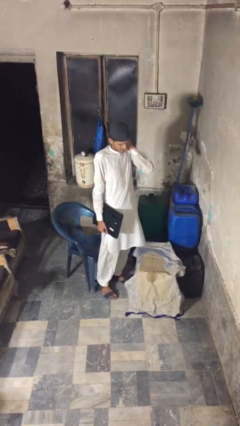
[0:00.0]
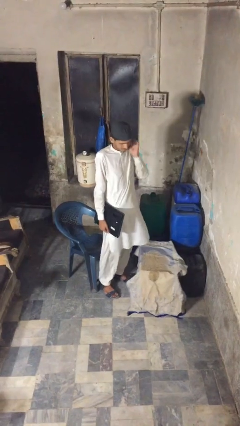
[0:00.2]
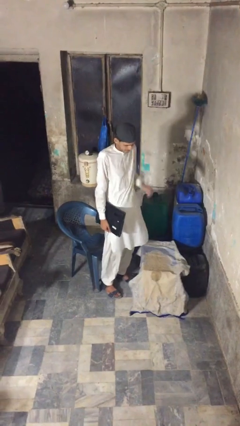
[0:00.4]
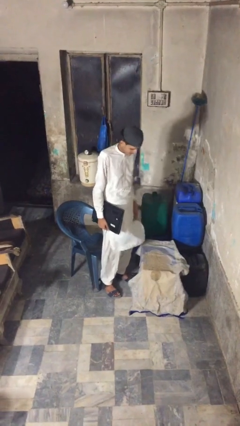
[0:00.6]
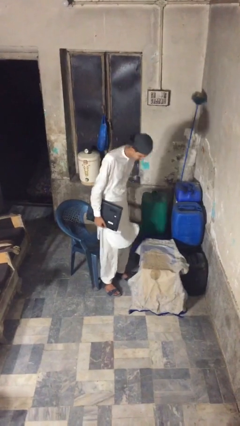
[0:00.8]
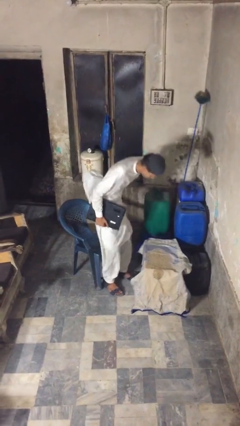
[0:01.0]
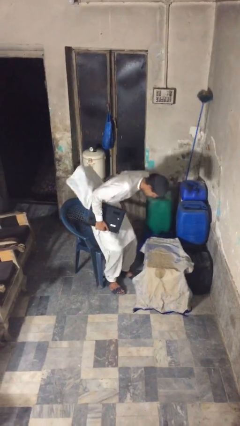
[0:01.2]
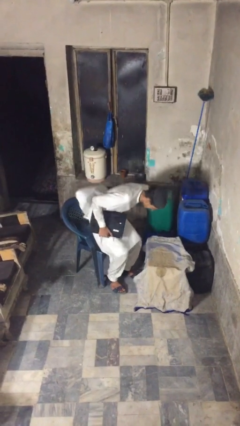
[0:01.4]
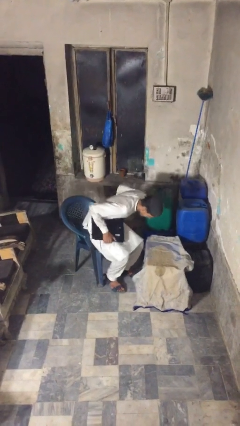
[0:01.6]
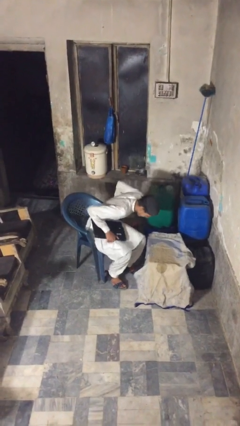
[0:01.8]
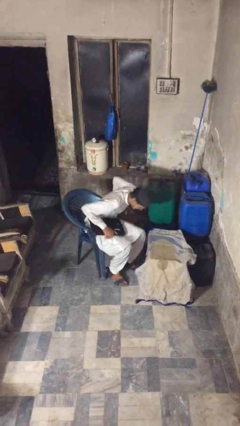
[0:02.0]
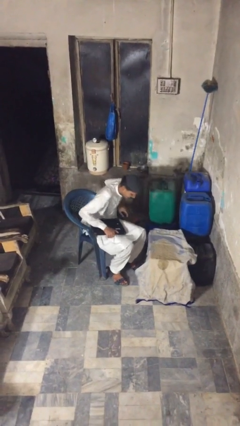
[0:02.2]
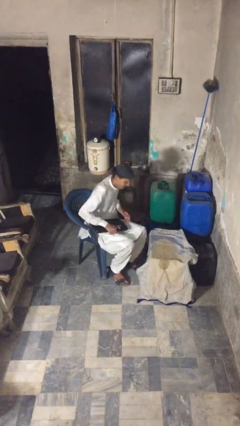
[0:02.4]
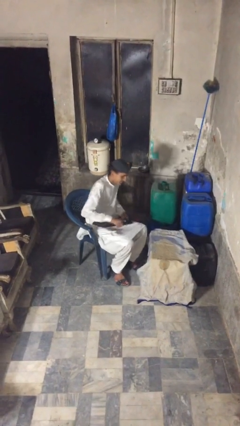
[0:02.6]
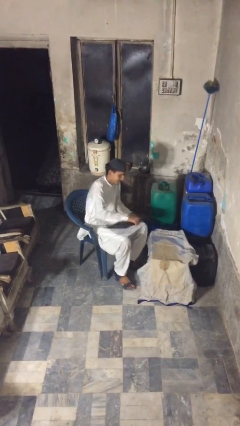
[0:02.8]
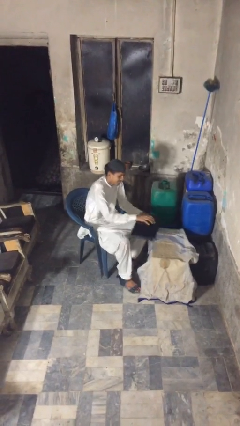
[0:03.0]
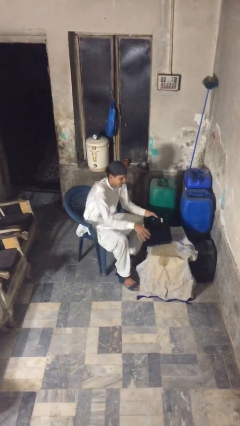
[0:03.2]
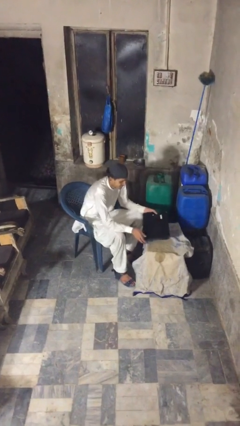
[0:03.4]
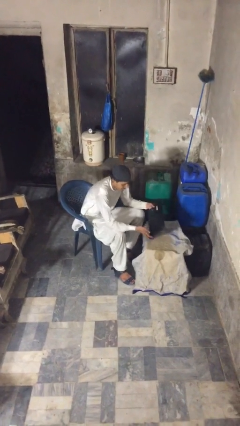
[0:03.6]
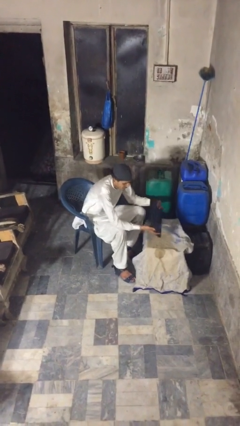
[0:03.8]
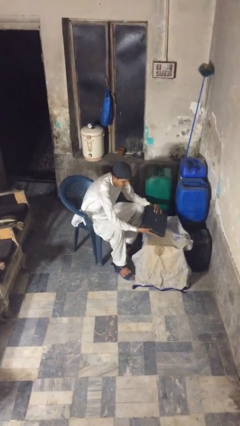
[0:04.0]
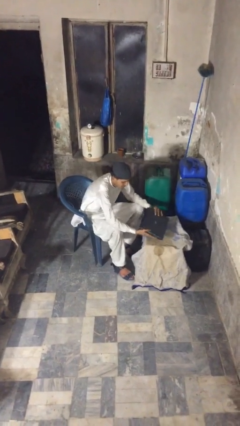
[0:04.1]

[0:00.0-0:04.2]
person sits down

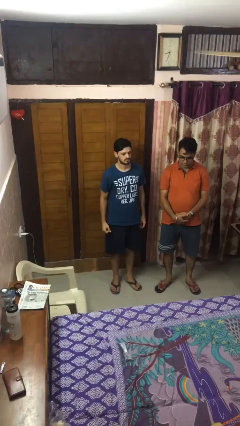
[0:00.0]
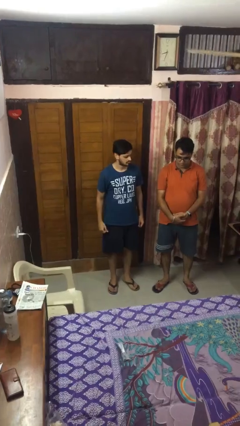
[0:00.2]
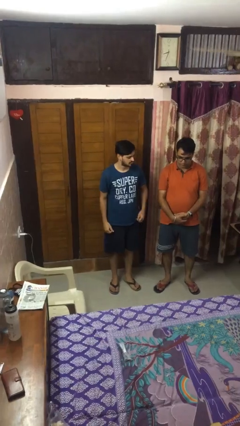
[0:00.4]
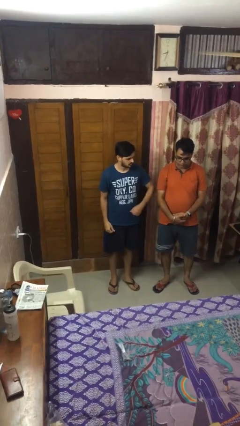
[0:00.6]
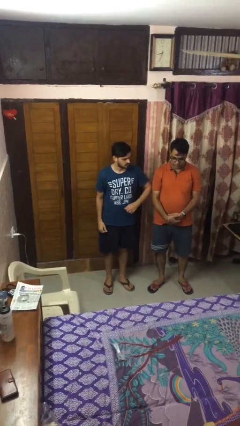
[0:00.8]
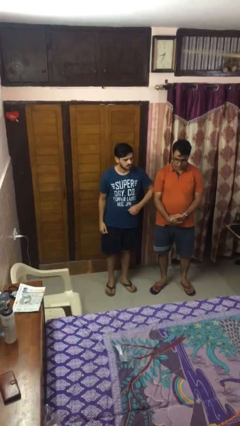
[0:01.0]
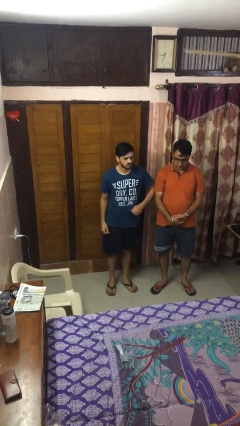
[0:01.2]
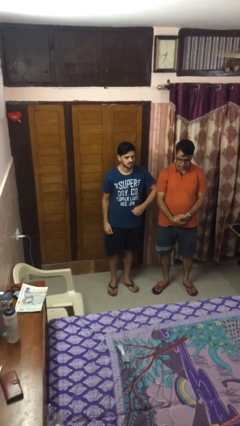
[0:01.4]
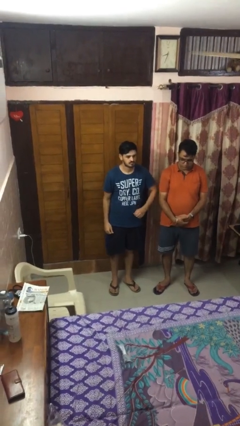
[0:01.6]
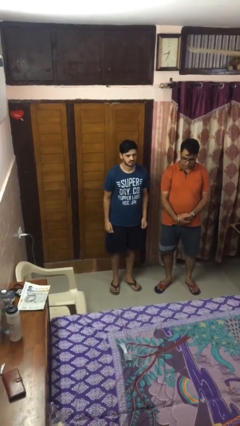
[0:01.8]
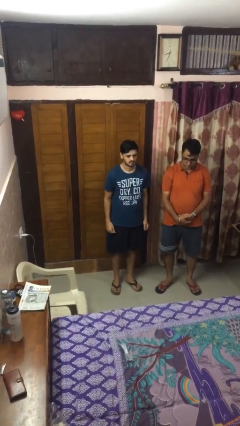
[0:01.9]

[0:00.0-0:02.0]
person nudges person with elbow

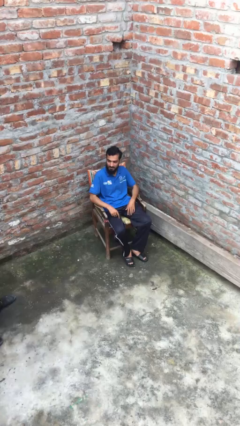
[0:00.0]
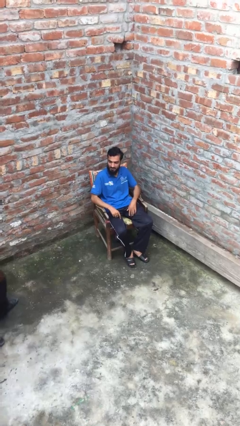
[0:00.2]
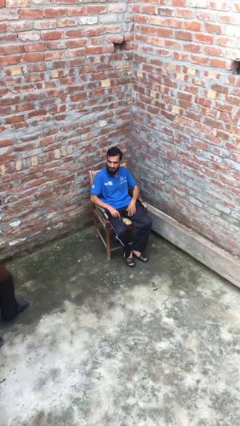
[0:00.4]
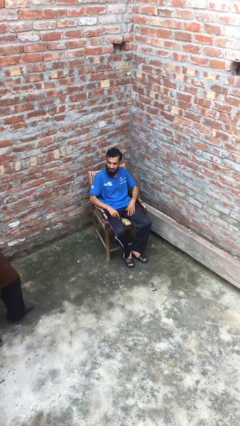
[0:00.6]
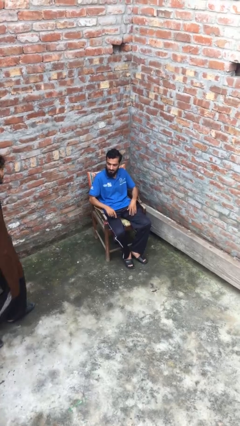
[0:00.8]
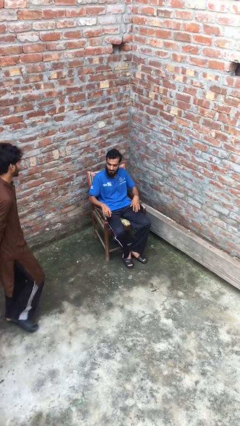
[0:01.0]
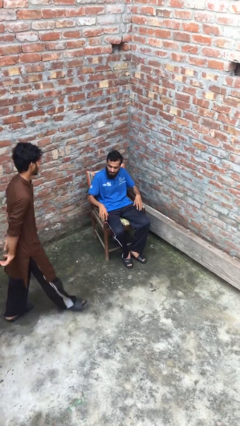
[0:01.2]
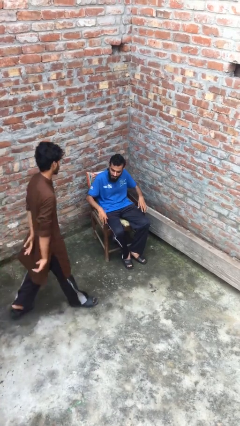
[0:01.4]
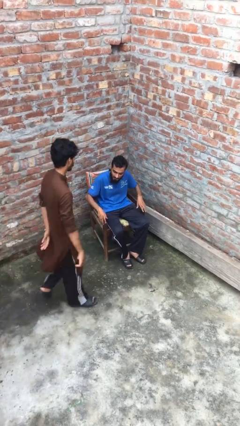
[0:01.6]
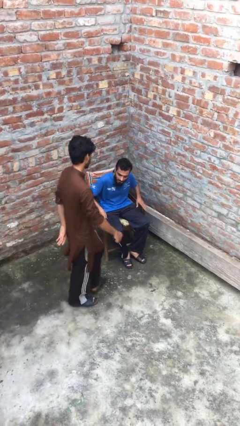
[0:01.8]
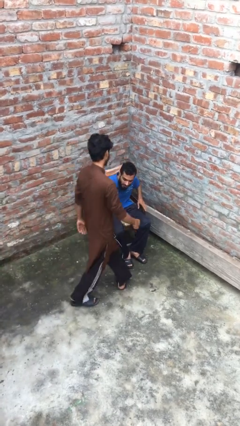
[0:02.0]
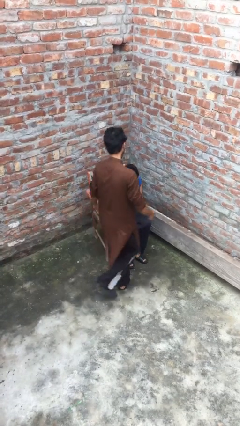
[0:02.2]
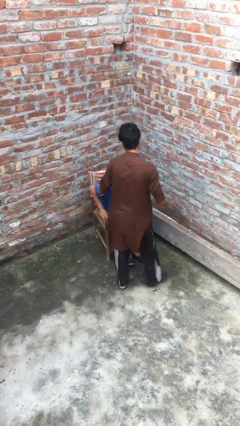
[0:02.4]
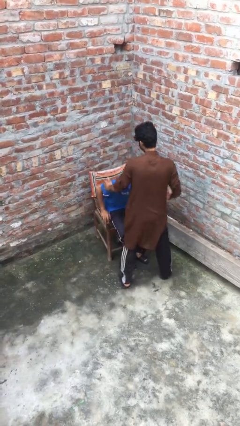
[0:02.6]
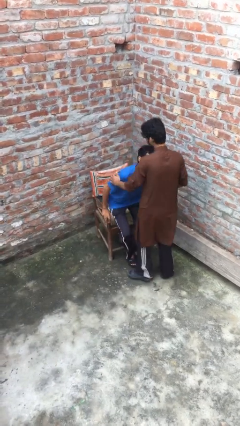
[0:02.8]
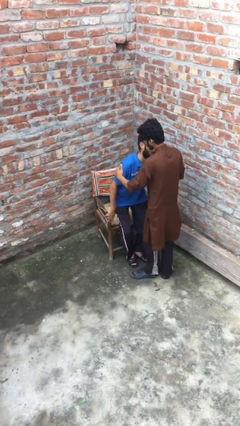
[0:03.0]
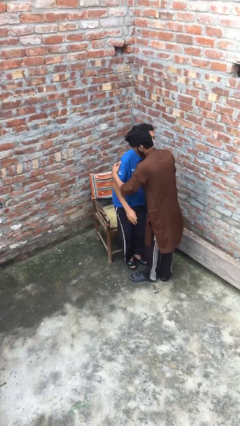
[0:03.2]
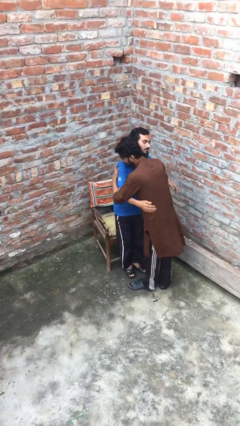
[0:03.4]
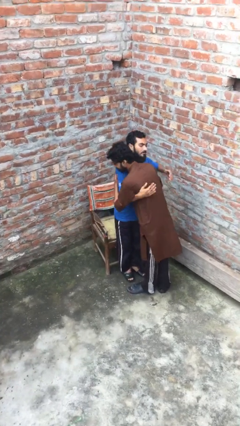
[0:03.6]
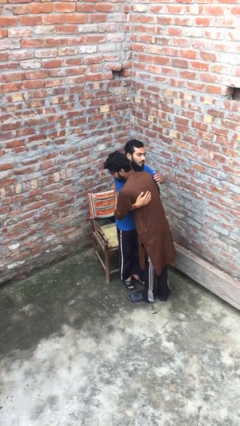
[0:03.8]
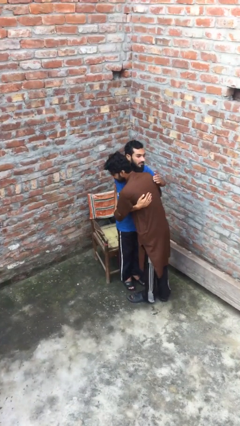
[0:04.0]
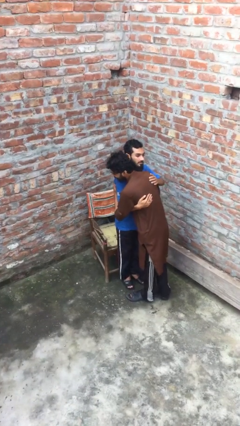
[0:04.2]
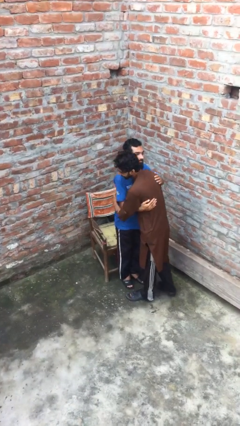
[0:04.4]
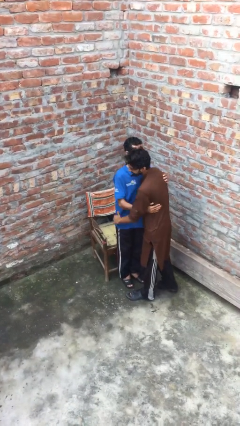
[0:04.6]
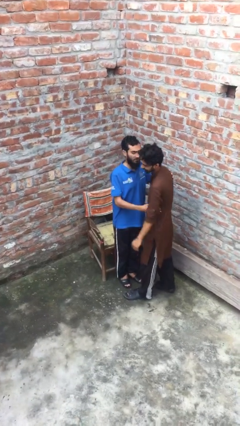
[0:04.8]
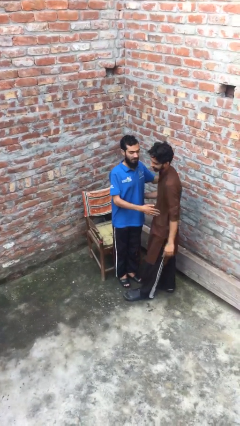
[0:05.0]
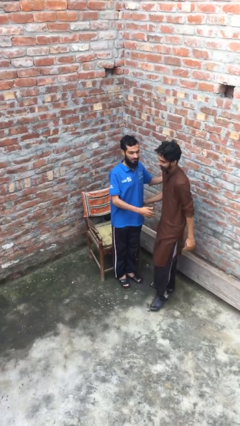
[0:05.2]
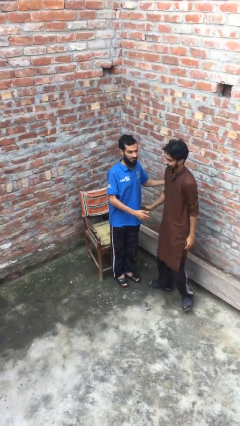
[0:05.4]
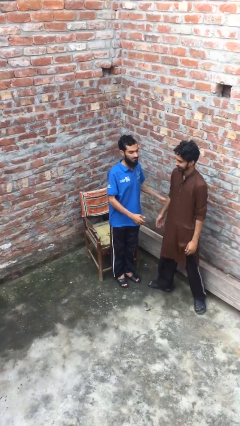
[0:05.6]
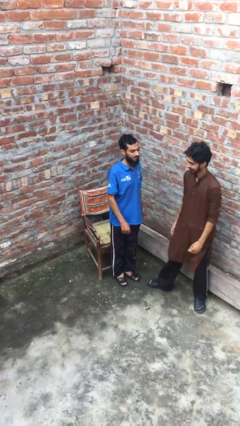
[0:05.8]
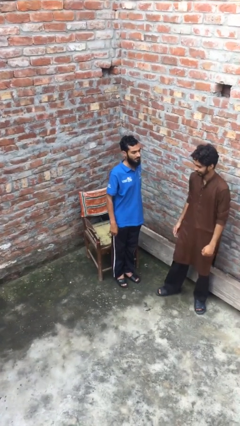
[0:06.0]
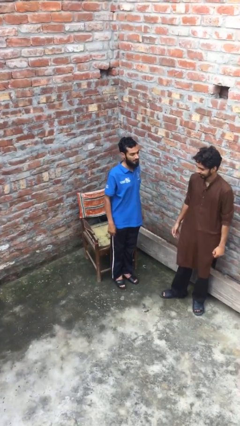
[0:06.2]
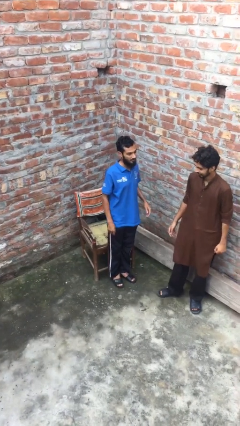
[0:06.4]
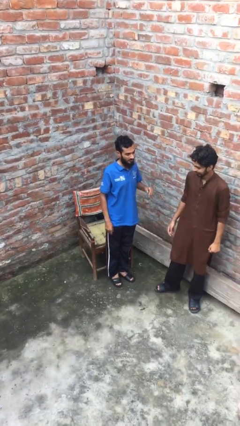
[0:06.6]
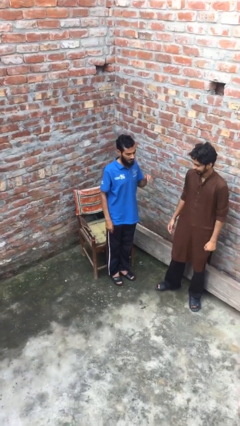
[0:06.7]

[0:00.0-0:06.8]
person embraces person

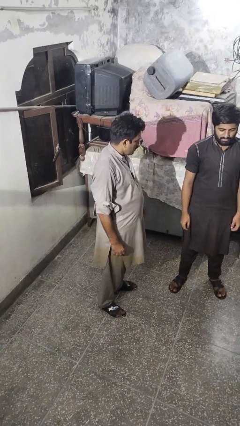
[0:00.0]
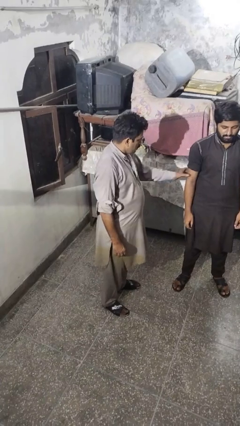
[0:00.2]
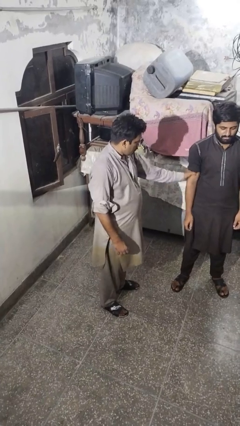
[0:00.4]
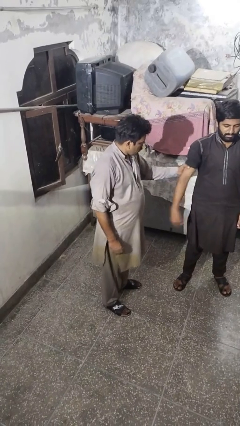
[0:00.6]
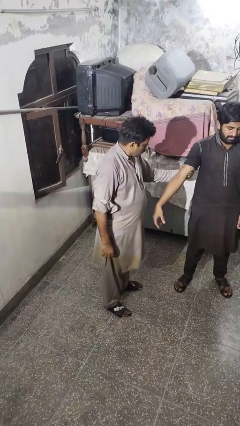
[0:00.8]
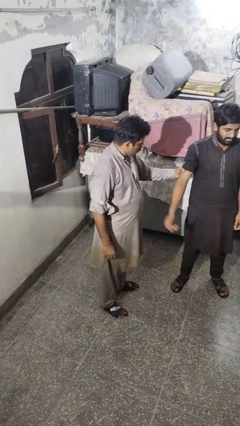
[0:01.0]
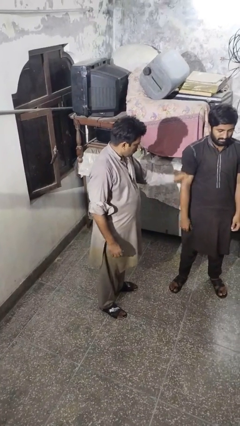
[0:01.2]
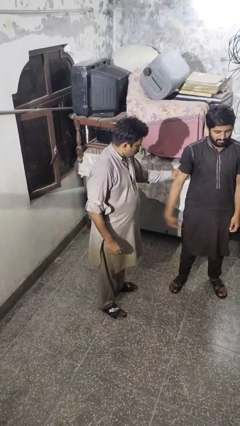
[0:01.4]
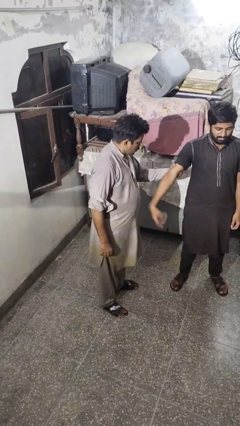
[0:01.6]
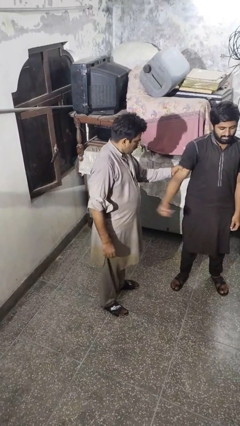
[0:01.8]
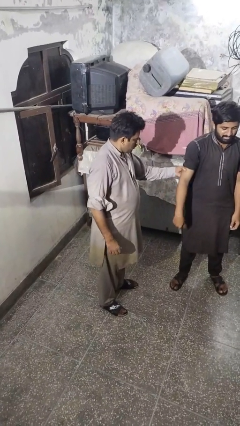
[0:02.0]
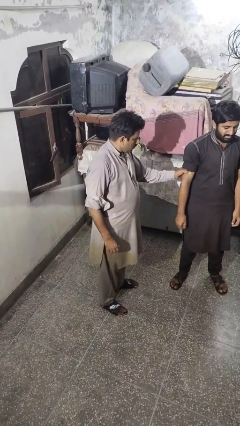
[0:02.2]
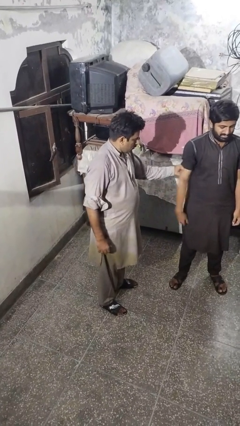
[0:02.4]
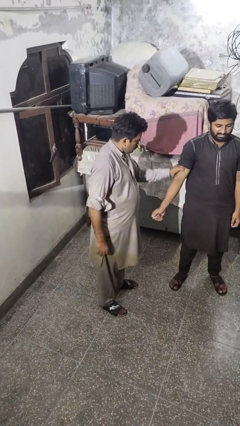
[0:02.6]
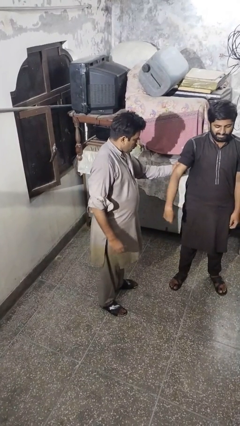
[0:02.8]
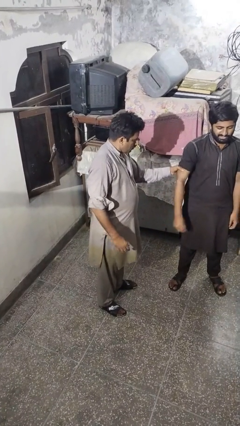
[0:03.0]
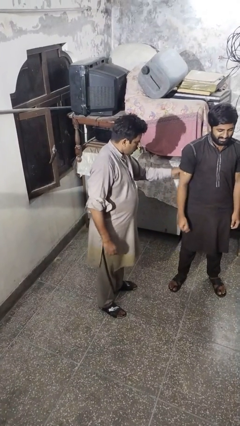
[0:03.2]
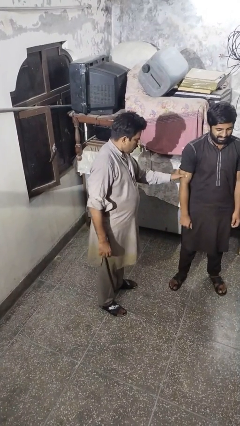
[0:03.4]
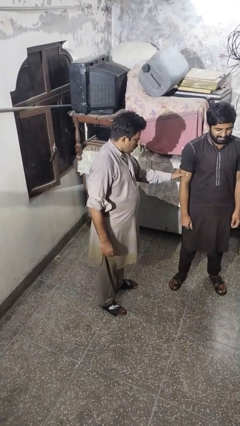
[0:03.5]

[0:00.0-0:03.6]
person grabs person by bicep

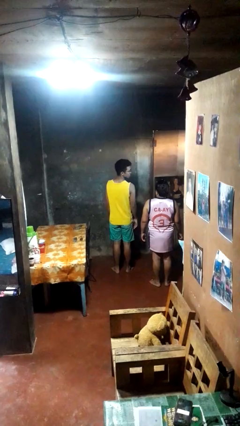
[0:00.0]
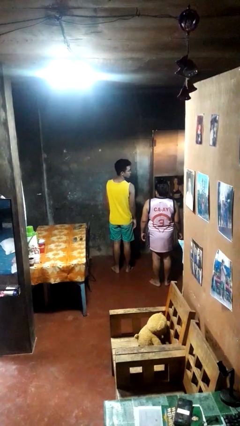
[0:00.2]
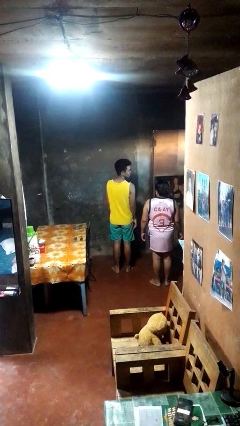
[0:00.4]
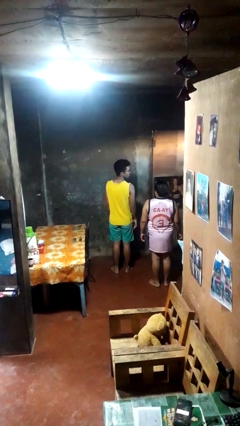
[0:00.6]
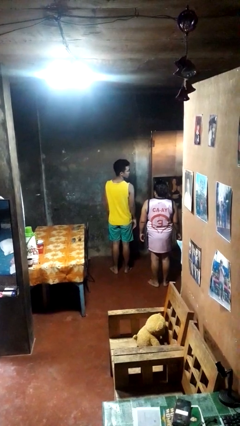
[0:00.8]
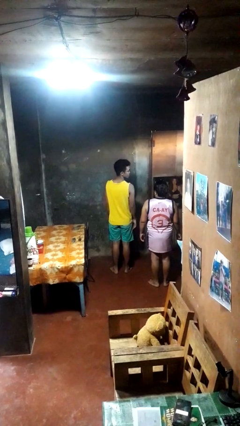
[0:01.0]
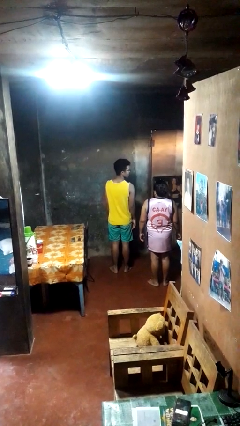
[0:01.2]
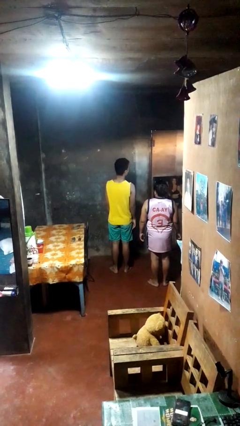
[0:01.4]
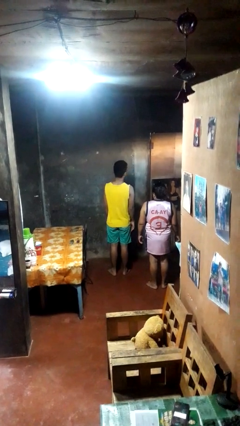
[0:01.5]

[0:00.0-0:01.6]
person looks over shoulder
